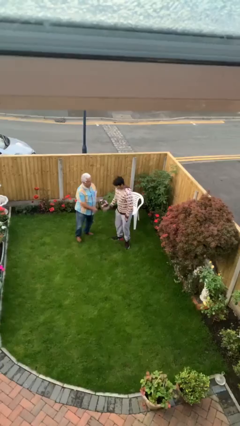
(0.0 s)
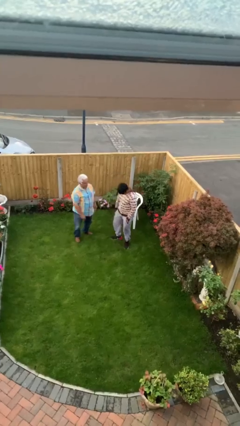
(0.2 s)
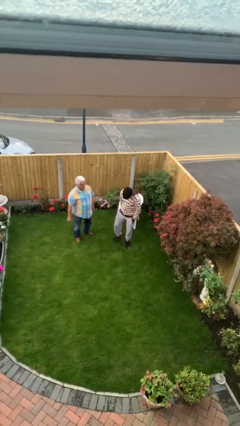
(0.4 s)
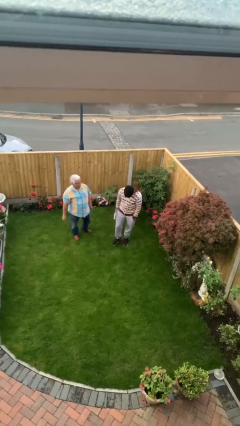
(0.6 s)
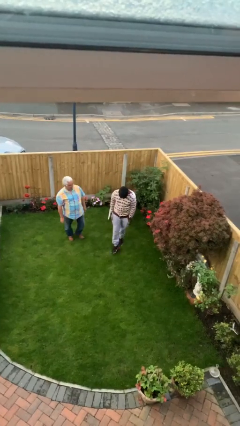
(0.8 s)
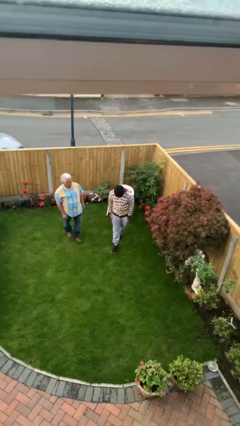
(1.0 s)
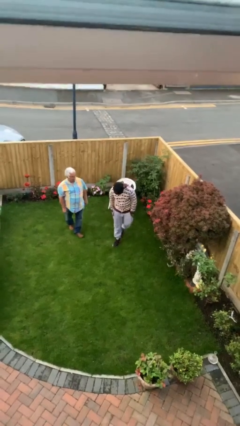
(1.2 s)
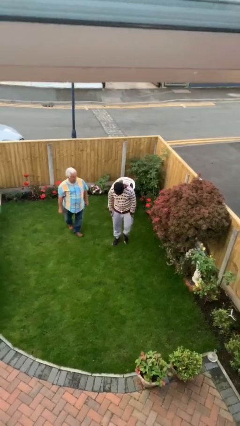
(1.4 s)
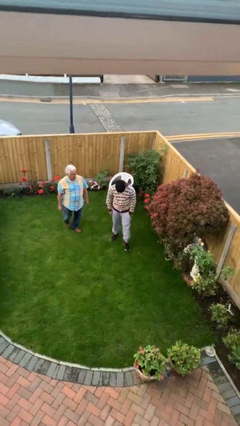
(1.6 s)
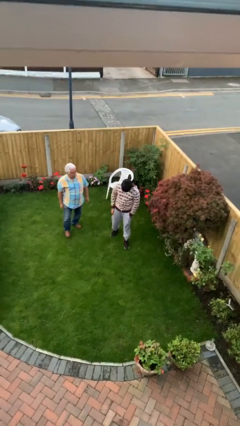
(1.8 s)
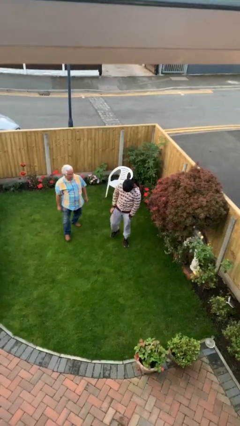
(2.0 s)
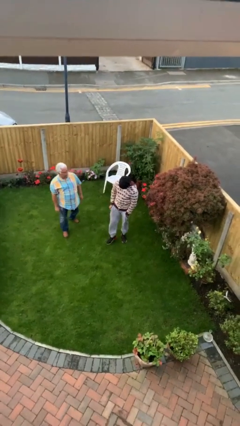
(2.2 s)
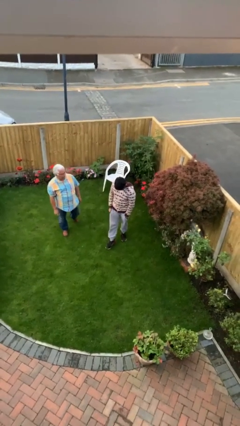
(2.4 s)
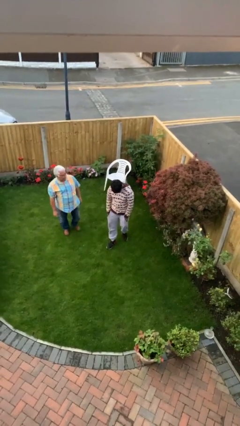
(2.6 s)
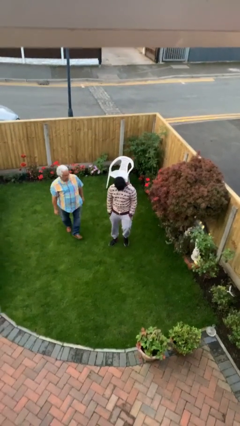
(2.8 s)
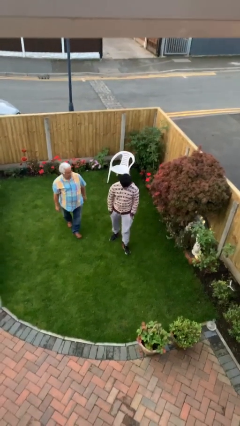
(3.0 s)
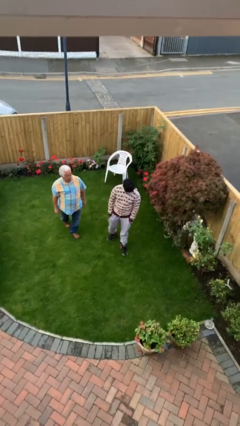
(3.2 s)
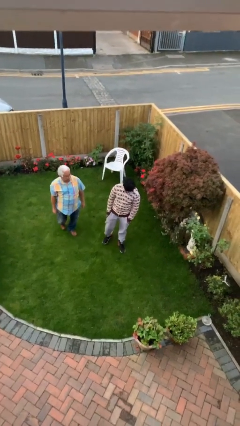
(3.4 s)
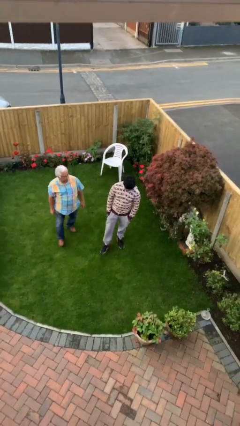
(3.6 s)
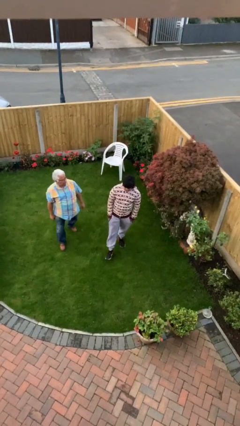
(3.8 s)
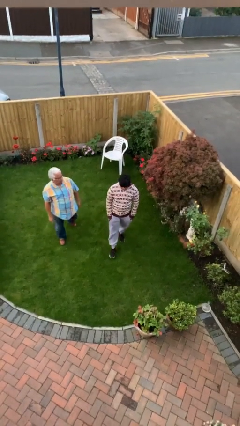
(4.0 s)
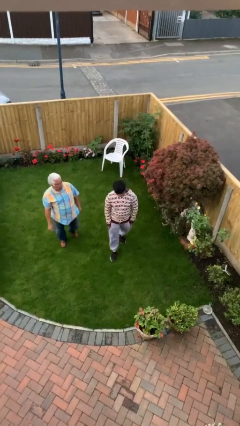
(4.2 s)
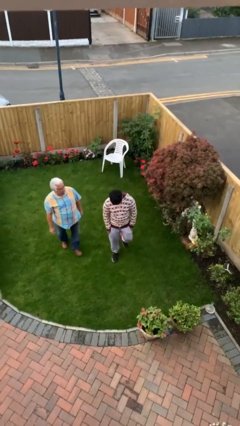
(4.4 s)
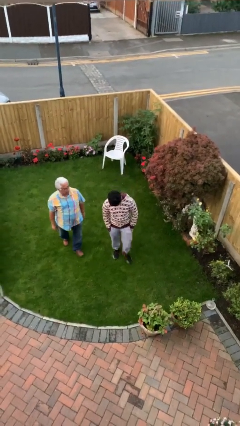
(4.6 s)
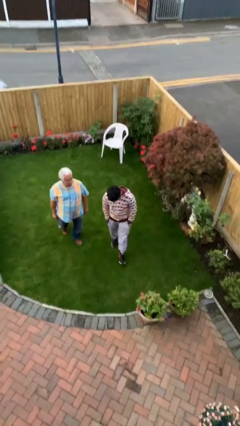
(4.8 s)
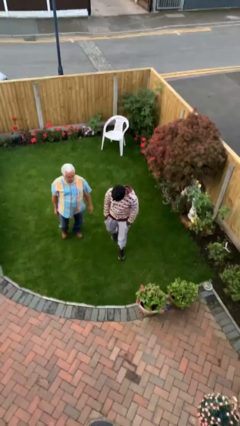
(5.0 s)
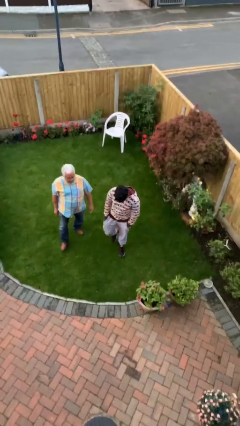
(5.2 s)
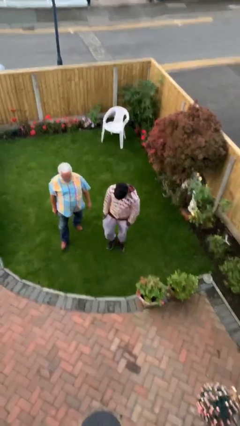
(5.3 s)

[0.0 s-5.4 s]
person talks to person

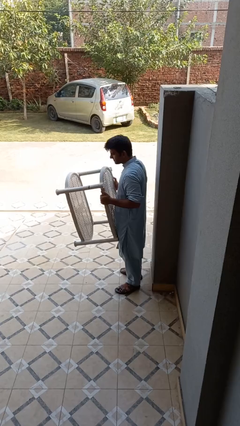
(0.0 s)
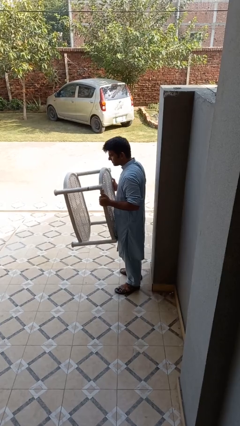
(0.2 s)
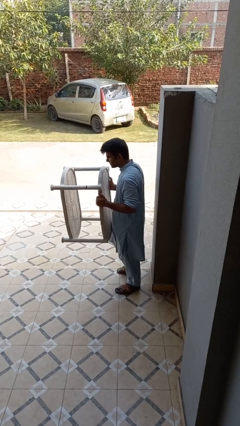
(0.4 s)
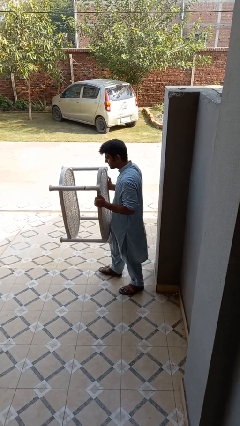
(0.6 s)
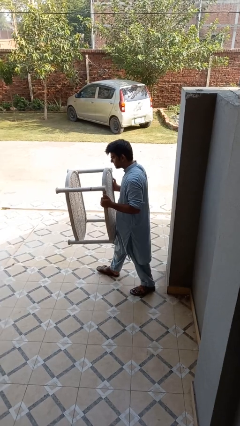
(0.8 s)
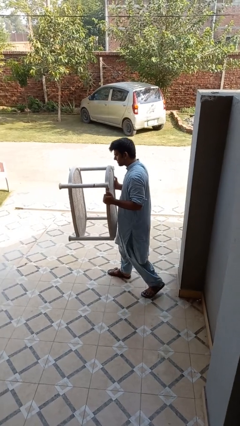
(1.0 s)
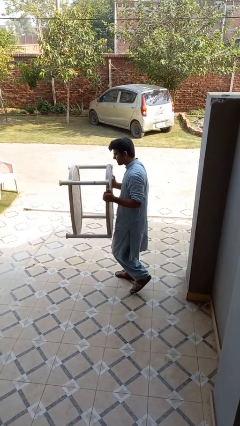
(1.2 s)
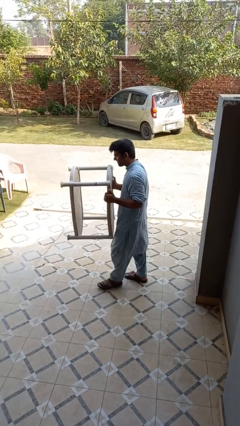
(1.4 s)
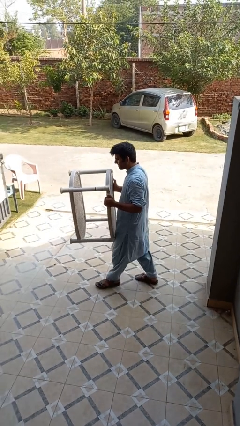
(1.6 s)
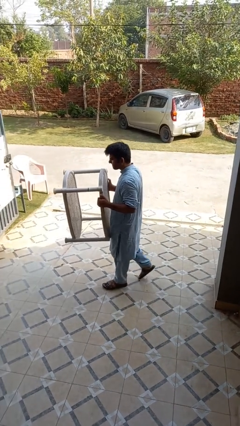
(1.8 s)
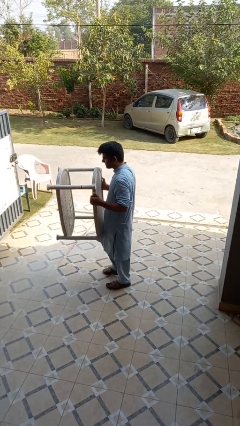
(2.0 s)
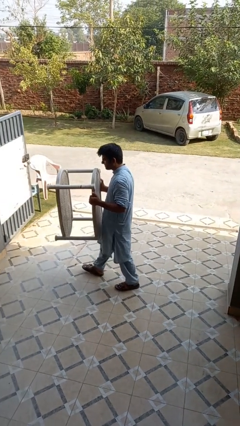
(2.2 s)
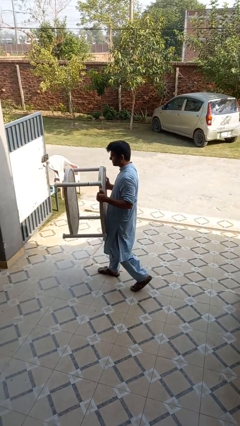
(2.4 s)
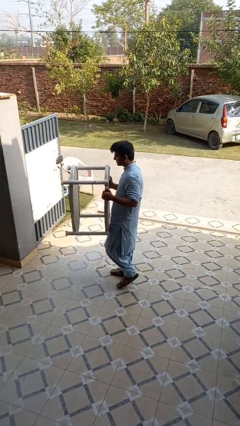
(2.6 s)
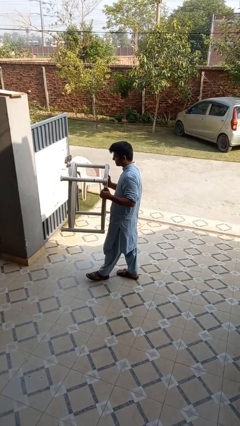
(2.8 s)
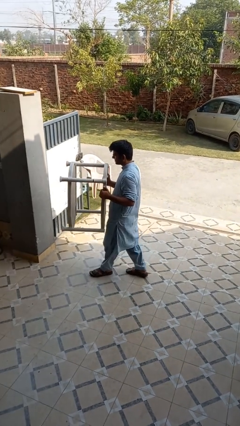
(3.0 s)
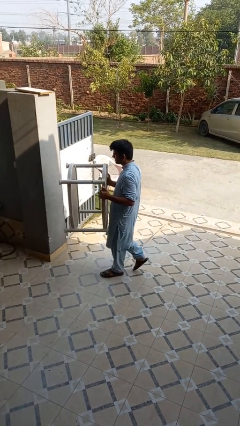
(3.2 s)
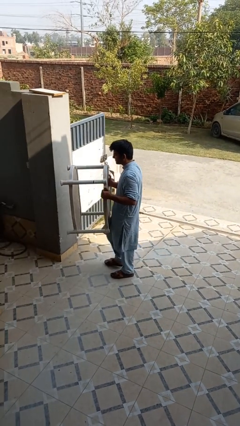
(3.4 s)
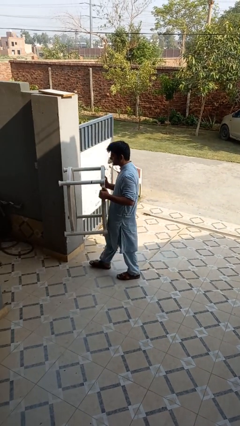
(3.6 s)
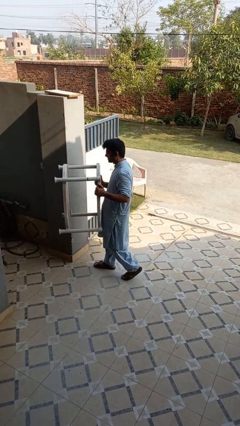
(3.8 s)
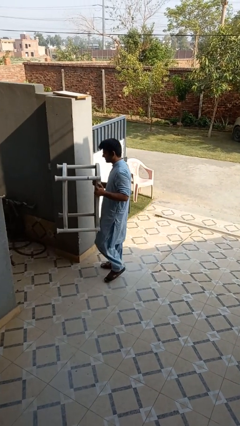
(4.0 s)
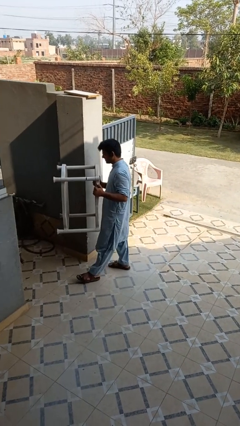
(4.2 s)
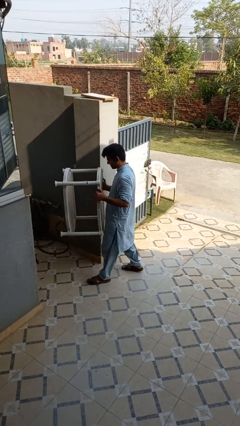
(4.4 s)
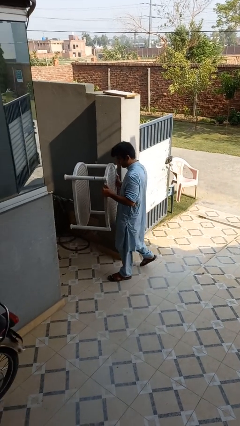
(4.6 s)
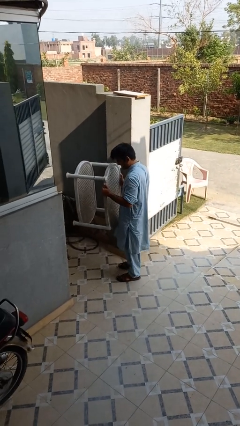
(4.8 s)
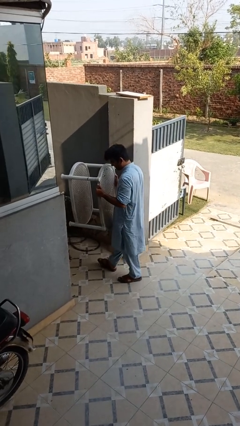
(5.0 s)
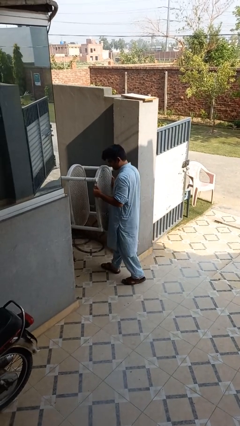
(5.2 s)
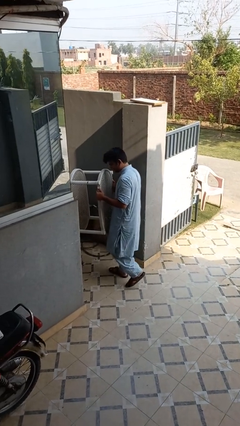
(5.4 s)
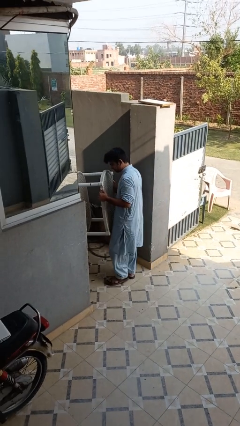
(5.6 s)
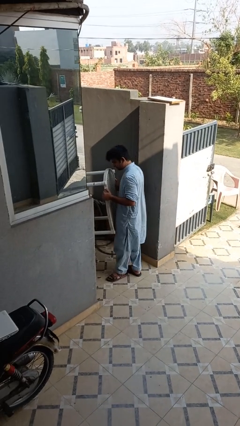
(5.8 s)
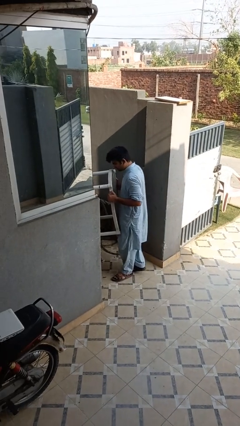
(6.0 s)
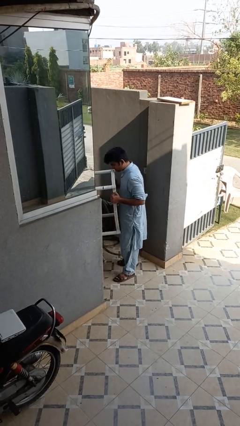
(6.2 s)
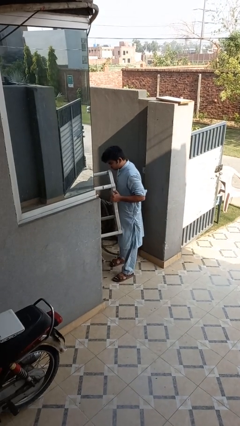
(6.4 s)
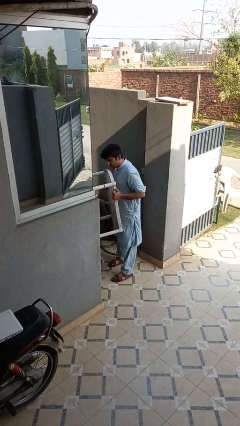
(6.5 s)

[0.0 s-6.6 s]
person carries furniture

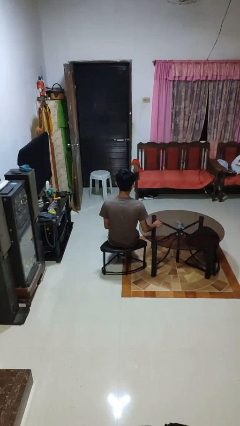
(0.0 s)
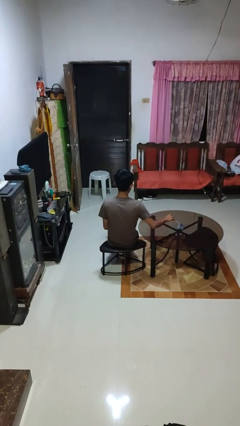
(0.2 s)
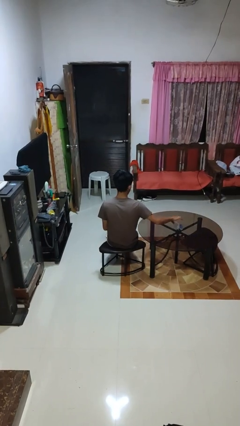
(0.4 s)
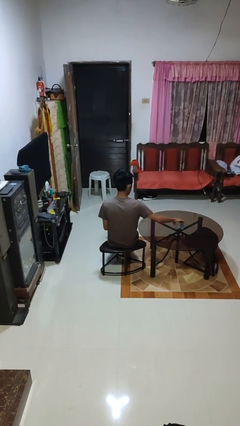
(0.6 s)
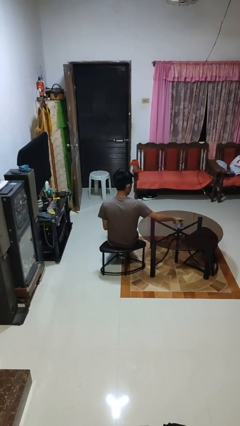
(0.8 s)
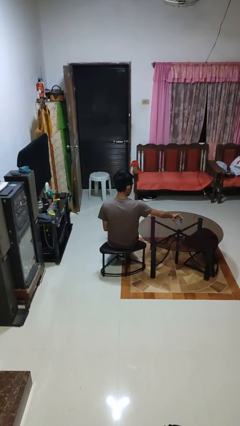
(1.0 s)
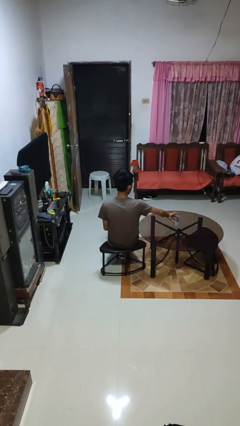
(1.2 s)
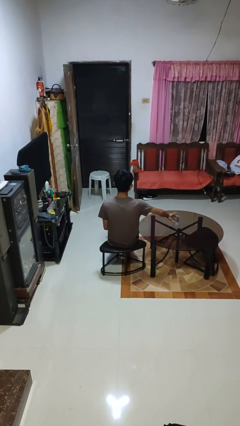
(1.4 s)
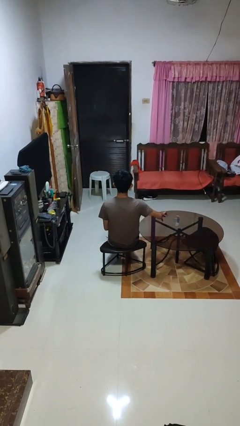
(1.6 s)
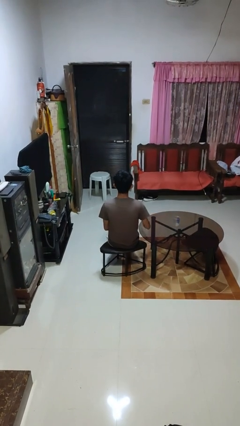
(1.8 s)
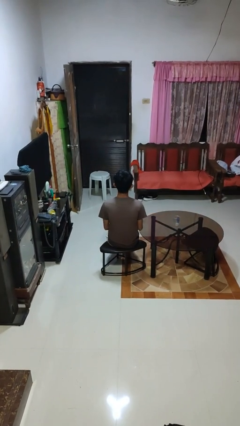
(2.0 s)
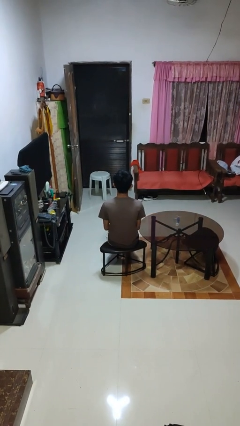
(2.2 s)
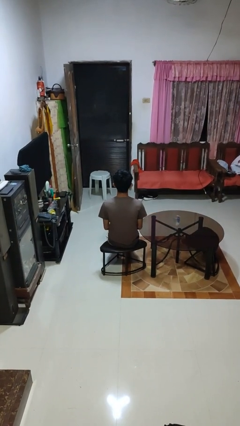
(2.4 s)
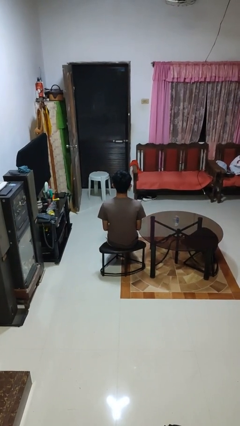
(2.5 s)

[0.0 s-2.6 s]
person sets upright glass

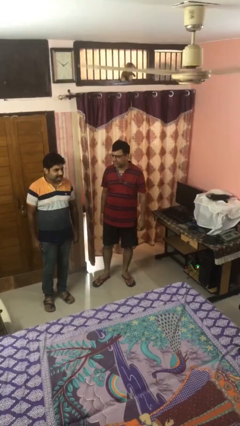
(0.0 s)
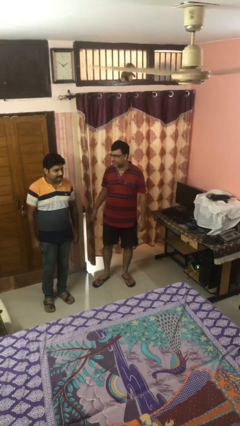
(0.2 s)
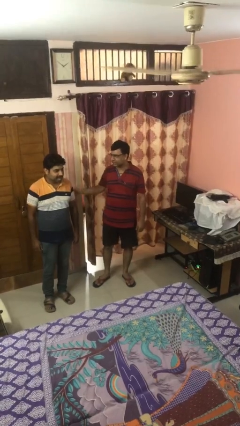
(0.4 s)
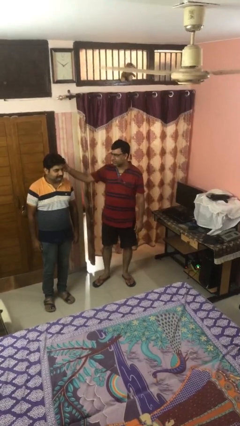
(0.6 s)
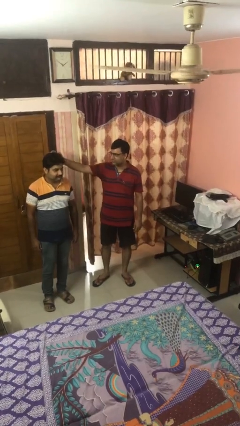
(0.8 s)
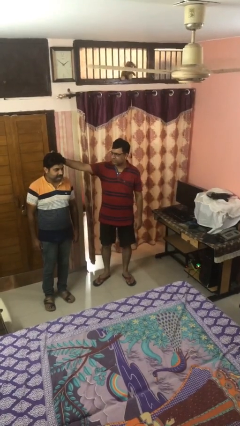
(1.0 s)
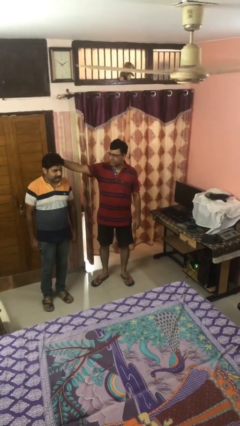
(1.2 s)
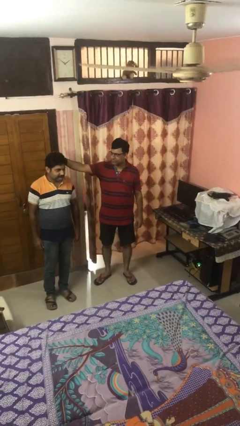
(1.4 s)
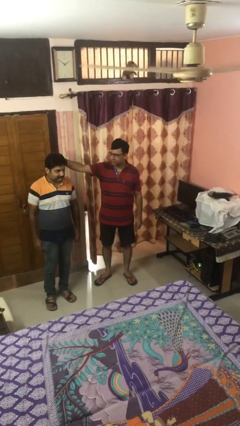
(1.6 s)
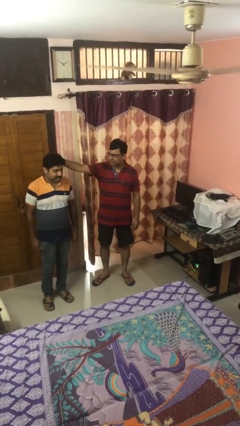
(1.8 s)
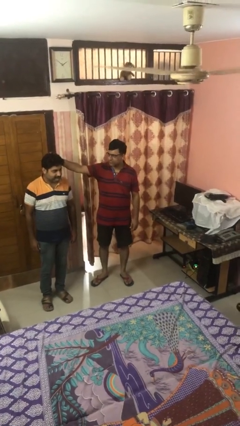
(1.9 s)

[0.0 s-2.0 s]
person grabs person by hair

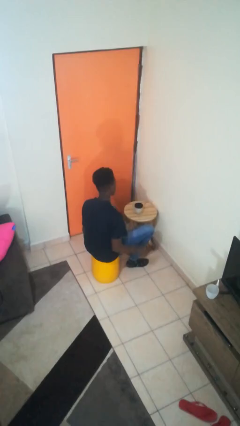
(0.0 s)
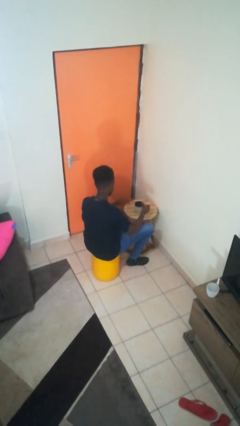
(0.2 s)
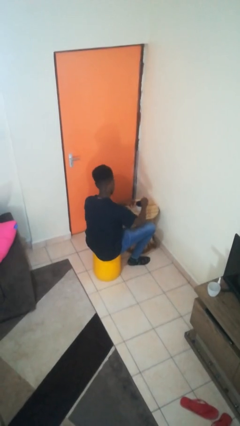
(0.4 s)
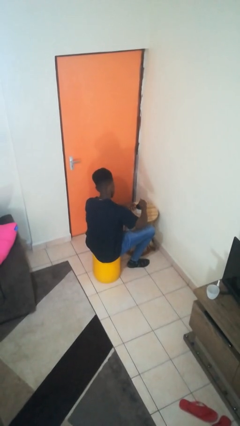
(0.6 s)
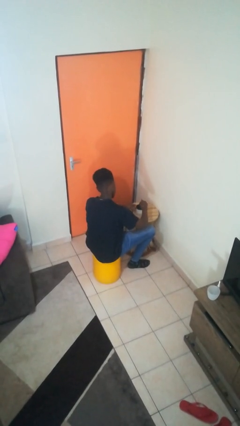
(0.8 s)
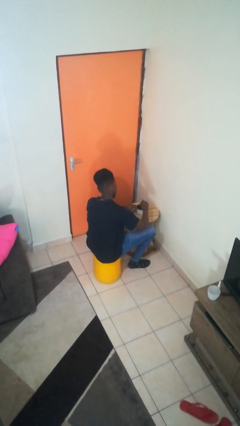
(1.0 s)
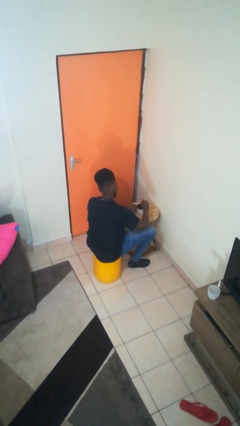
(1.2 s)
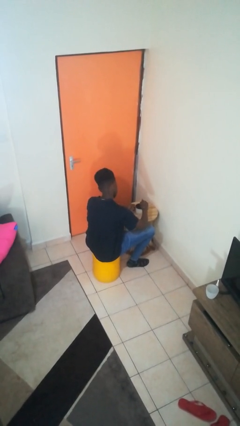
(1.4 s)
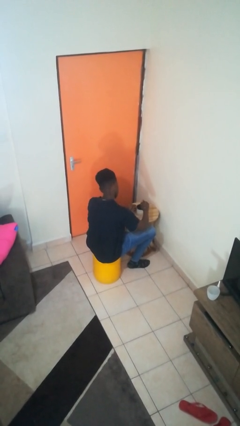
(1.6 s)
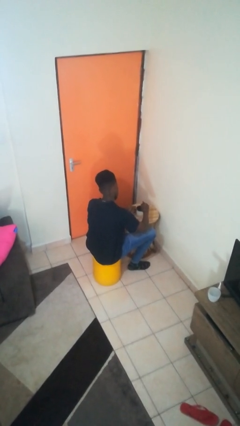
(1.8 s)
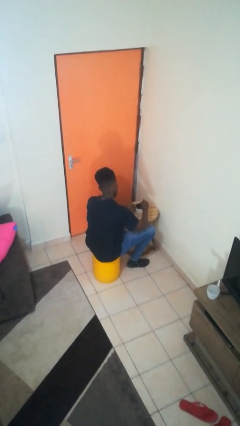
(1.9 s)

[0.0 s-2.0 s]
person stirs mug
